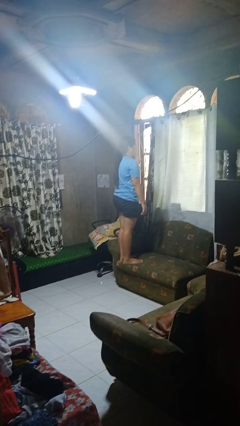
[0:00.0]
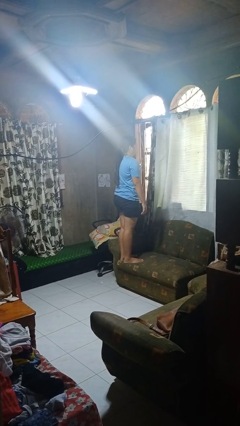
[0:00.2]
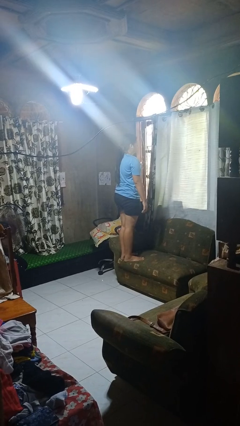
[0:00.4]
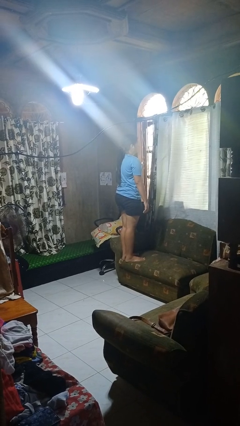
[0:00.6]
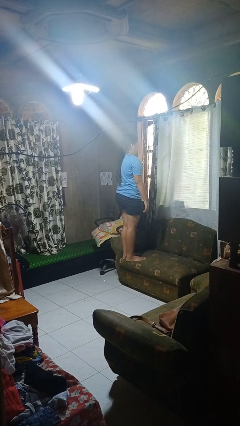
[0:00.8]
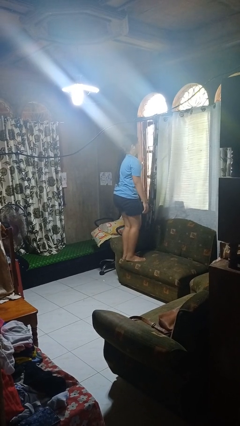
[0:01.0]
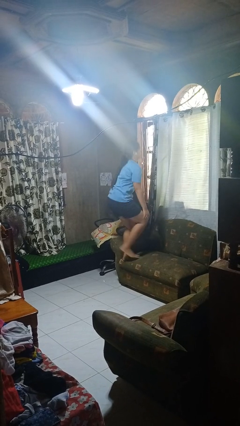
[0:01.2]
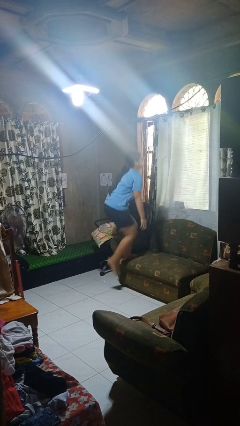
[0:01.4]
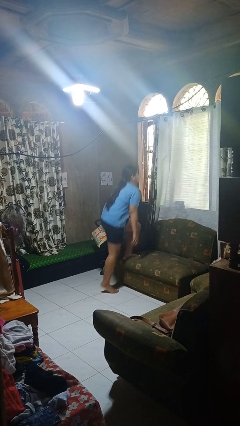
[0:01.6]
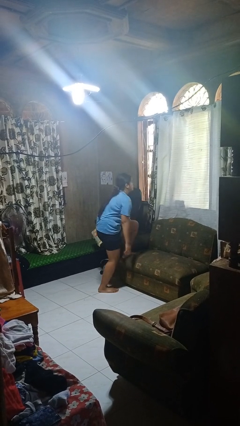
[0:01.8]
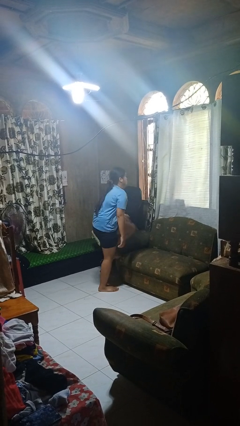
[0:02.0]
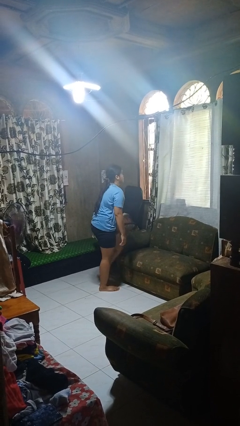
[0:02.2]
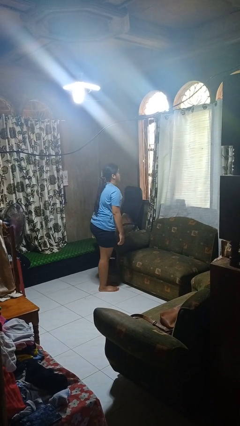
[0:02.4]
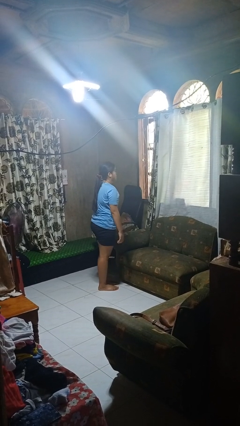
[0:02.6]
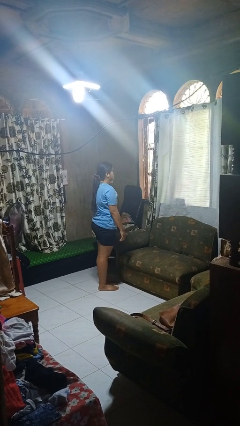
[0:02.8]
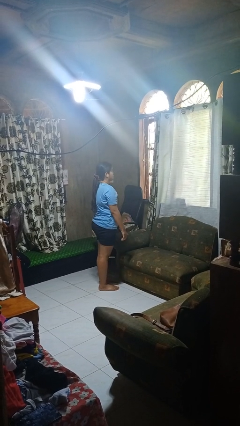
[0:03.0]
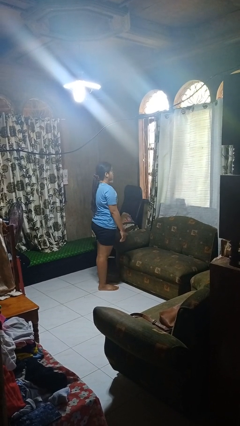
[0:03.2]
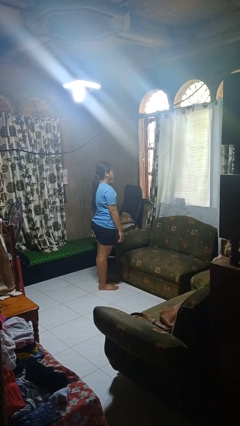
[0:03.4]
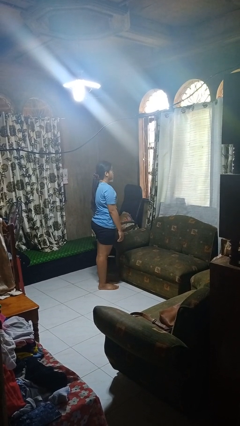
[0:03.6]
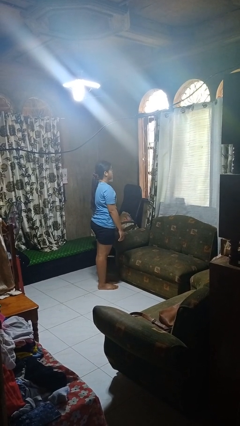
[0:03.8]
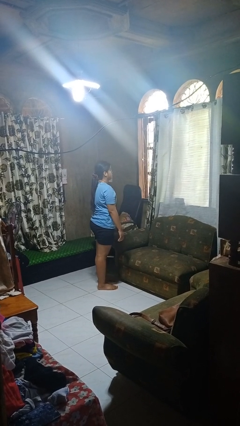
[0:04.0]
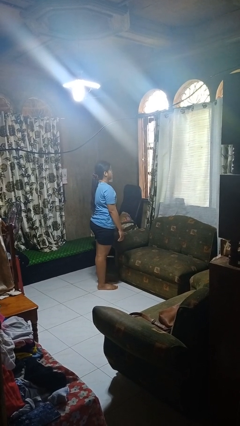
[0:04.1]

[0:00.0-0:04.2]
person climbs off couch

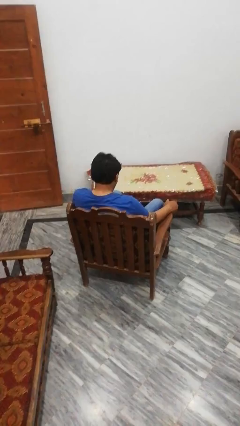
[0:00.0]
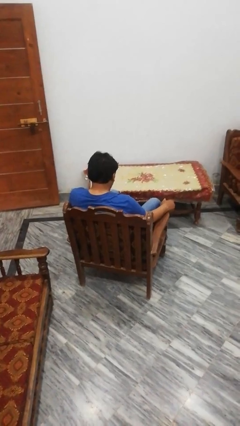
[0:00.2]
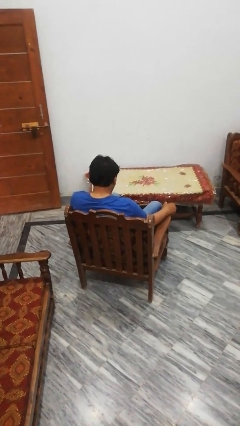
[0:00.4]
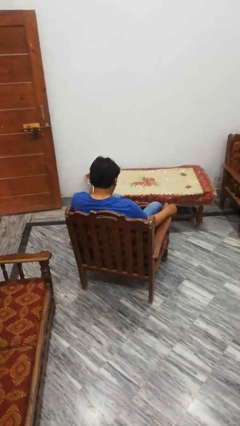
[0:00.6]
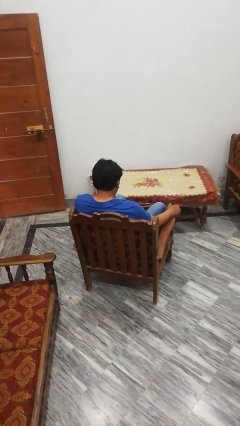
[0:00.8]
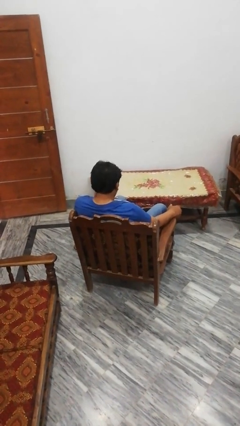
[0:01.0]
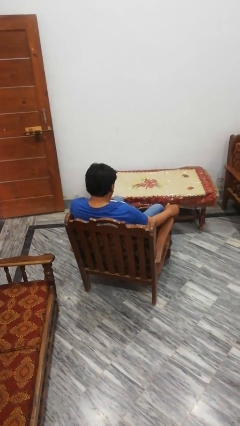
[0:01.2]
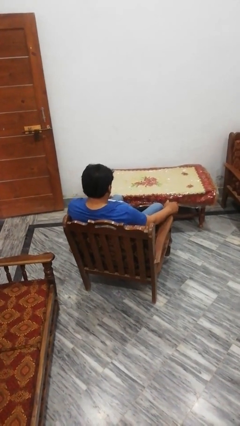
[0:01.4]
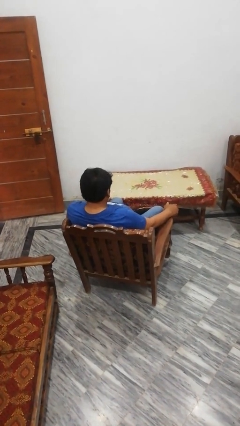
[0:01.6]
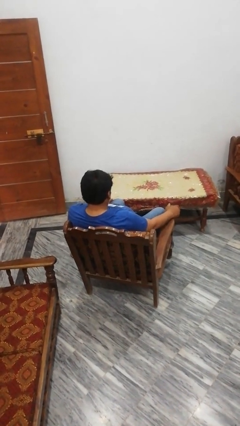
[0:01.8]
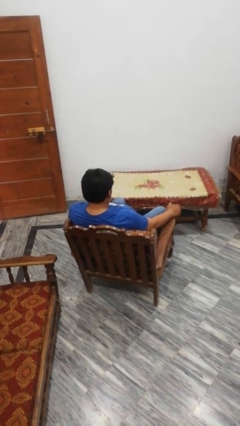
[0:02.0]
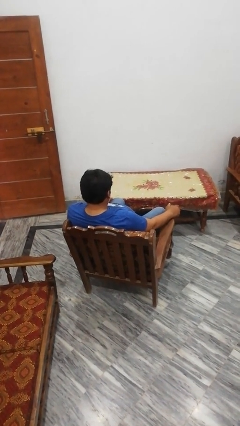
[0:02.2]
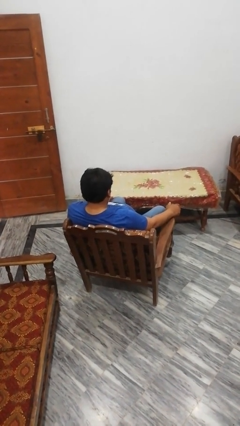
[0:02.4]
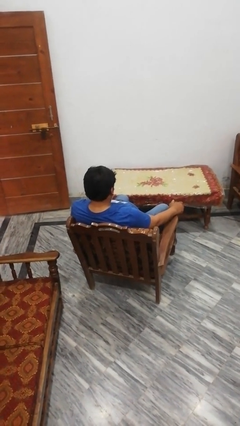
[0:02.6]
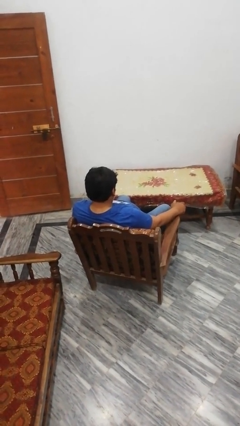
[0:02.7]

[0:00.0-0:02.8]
person pulls out chair

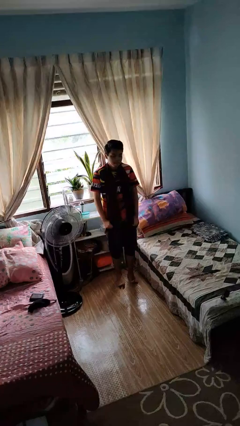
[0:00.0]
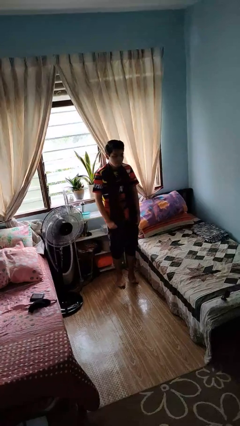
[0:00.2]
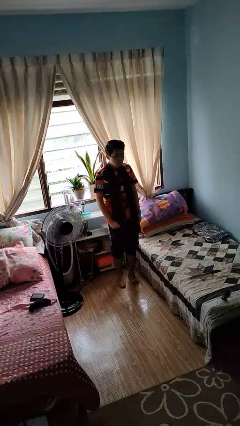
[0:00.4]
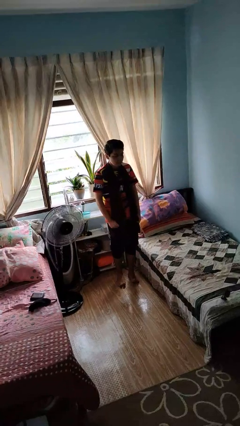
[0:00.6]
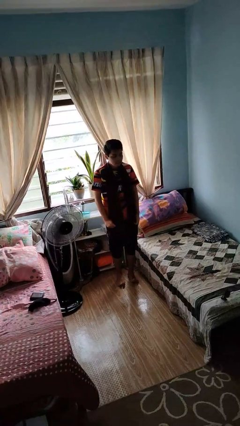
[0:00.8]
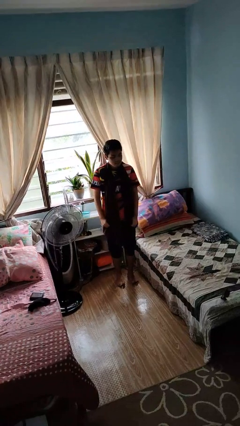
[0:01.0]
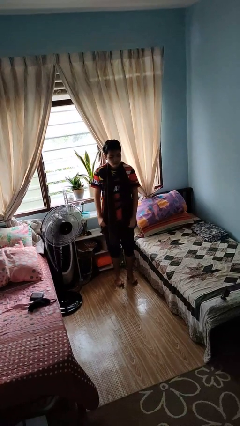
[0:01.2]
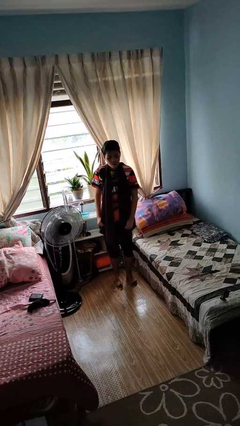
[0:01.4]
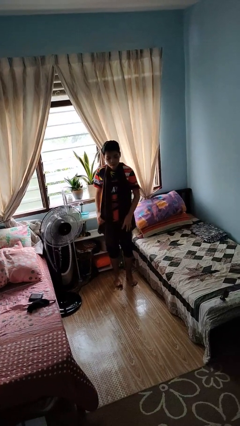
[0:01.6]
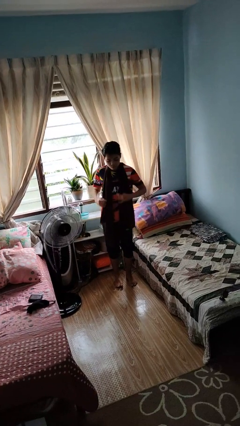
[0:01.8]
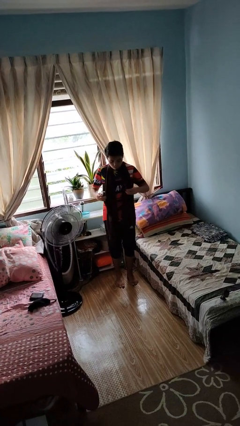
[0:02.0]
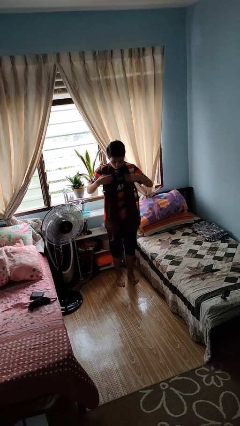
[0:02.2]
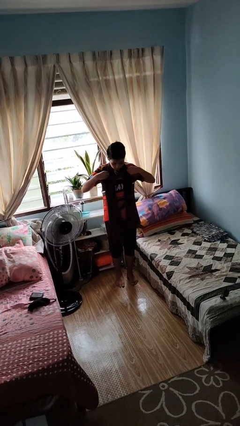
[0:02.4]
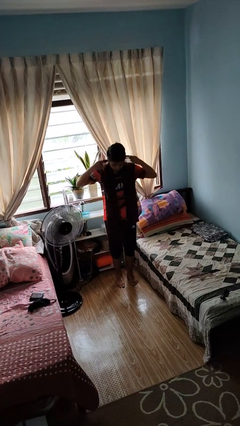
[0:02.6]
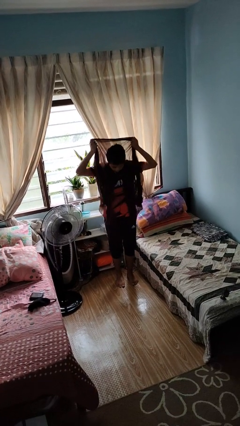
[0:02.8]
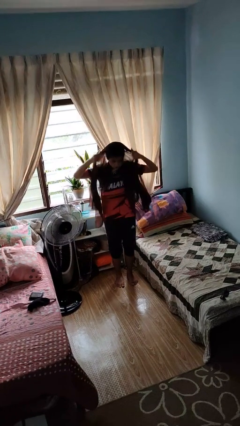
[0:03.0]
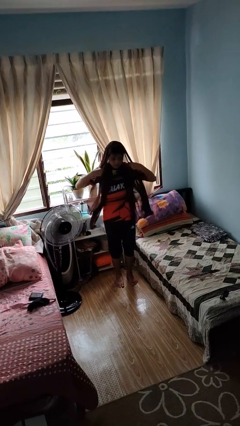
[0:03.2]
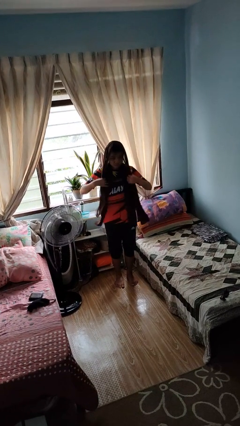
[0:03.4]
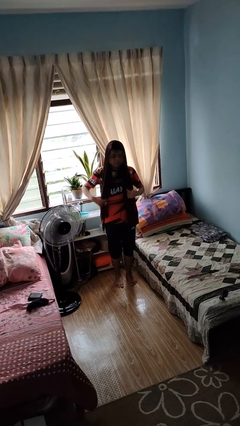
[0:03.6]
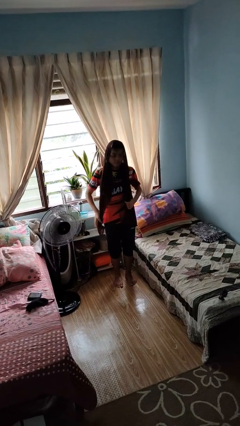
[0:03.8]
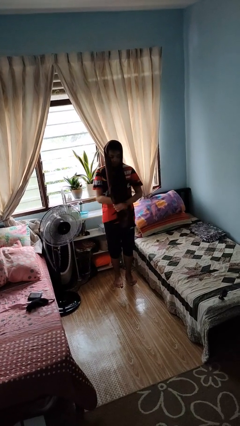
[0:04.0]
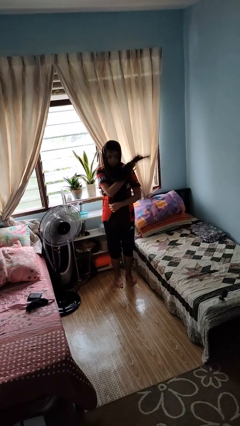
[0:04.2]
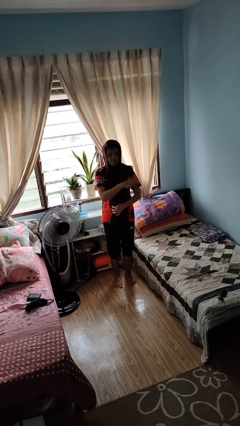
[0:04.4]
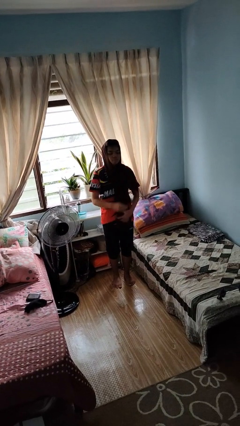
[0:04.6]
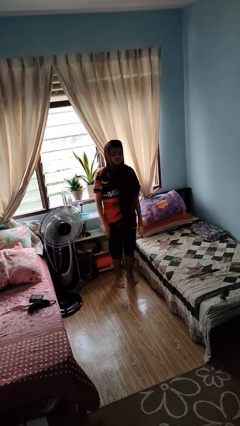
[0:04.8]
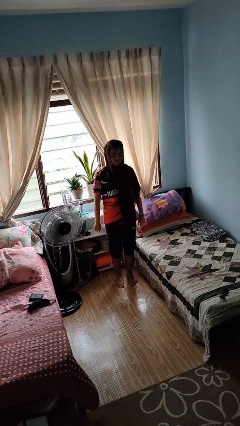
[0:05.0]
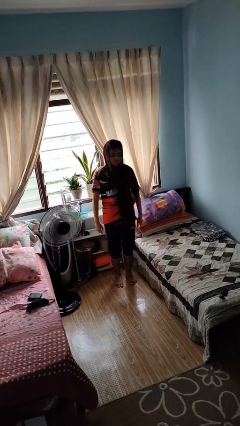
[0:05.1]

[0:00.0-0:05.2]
person puts on scarf

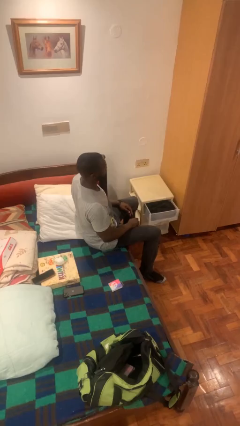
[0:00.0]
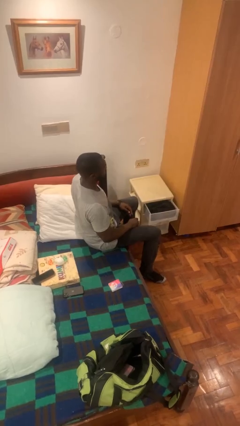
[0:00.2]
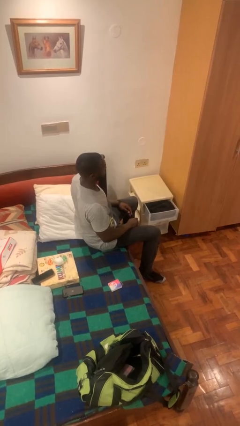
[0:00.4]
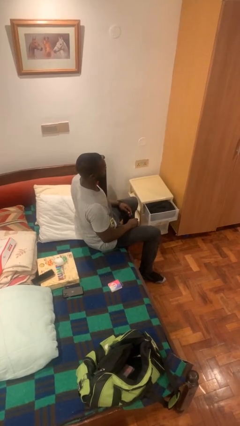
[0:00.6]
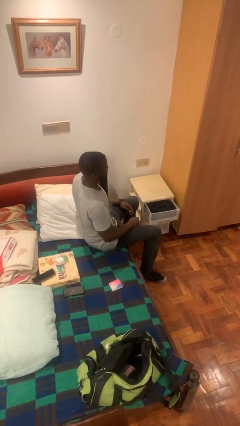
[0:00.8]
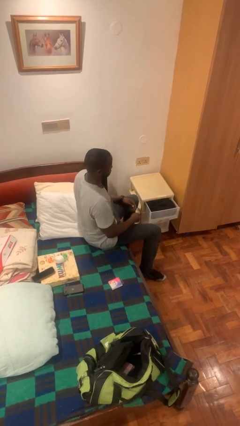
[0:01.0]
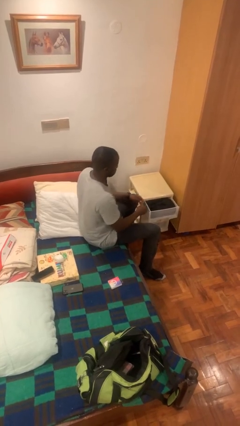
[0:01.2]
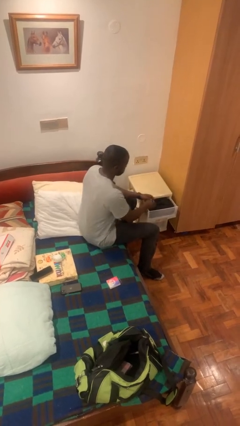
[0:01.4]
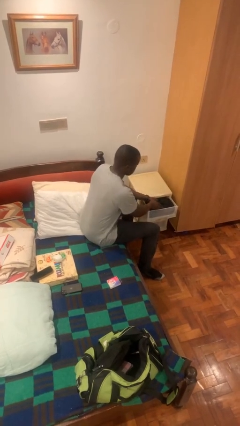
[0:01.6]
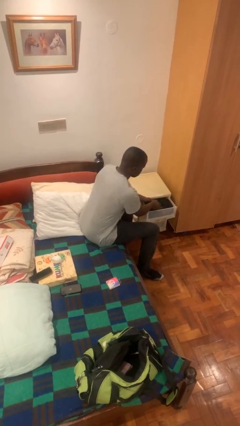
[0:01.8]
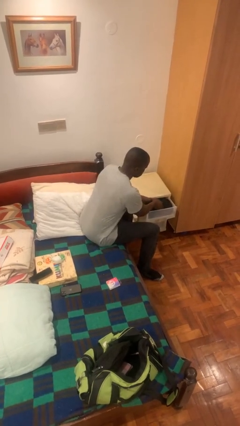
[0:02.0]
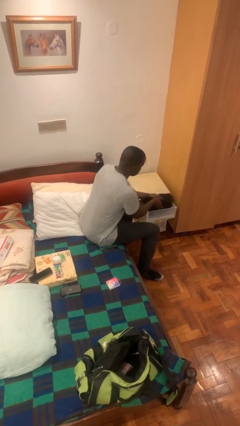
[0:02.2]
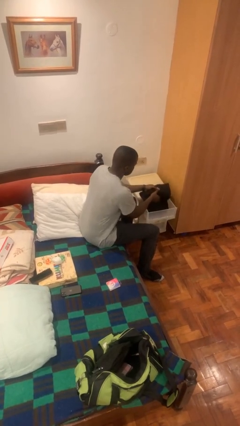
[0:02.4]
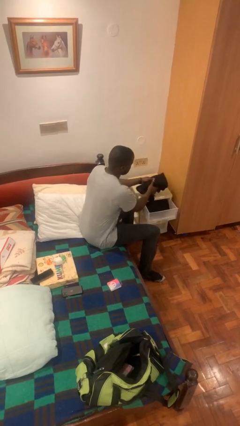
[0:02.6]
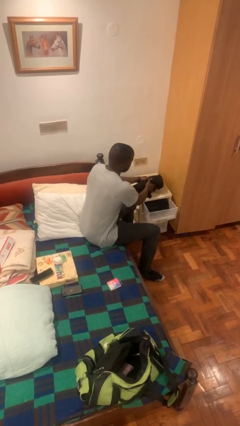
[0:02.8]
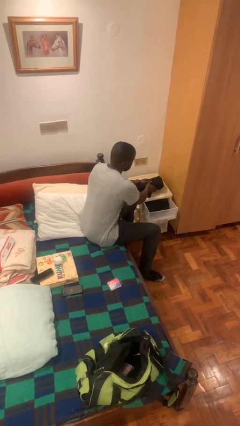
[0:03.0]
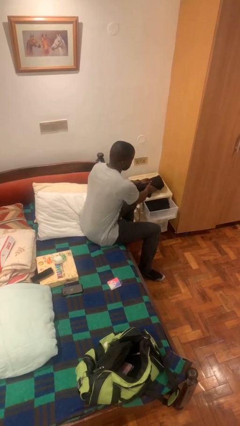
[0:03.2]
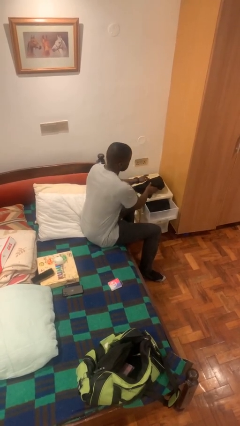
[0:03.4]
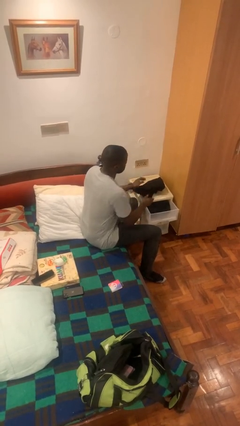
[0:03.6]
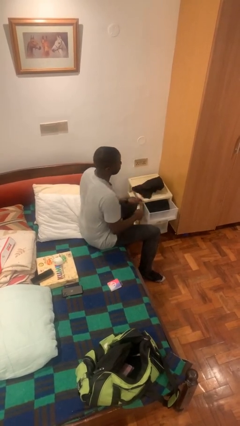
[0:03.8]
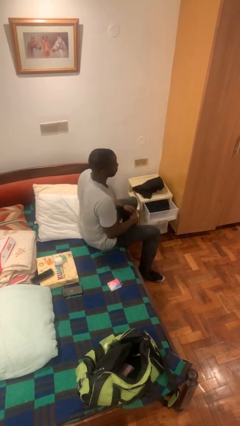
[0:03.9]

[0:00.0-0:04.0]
person takes clothes from dresser

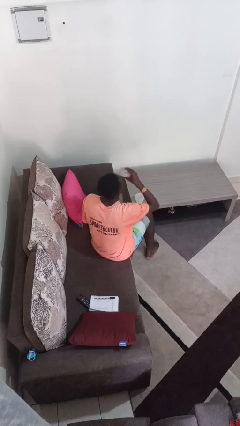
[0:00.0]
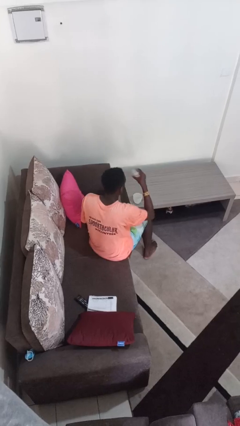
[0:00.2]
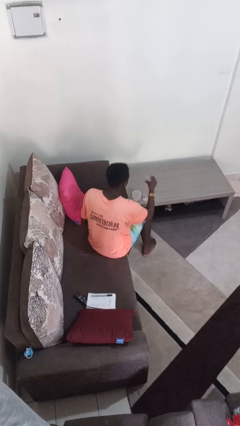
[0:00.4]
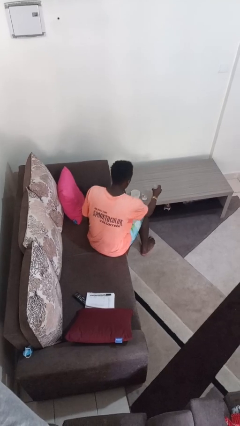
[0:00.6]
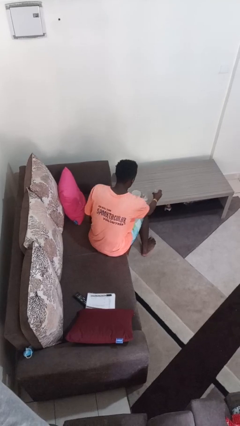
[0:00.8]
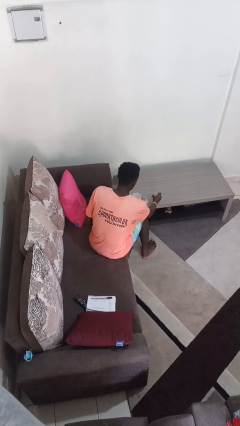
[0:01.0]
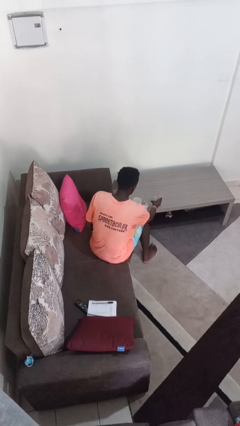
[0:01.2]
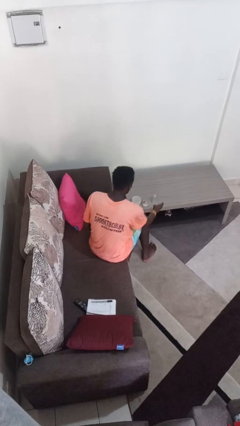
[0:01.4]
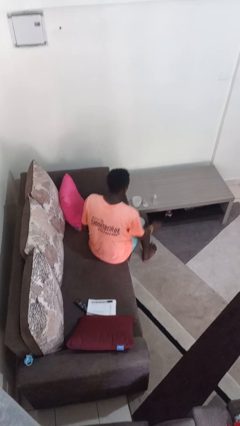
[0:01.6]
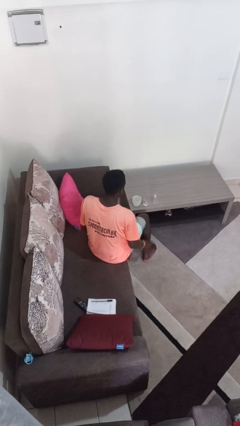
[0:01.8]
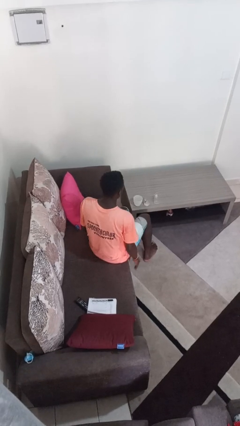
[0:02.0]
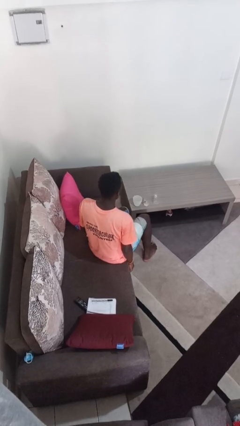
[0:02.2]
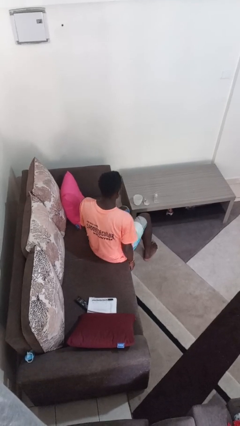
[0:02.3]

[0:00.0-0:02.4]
person puts down object on table
